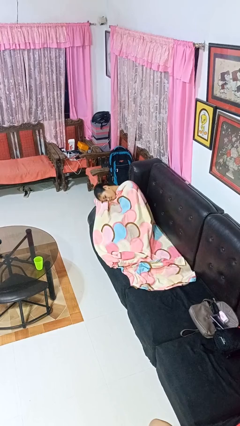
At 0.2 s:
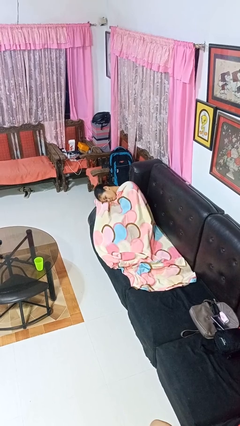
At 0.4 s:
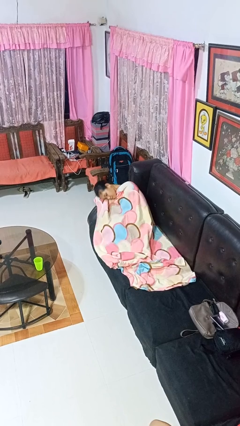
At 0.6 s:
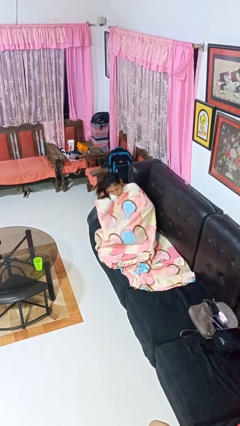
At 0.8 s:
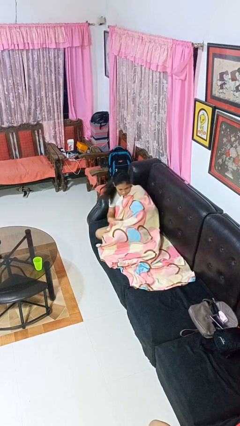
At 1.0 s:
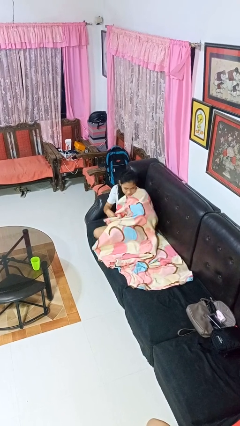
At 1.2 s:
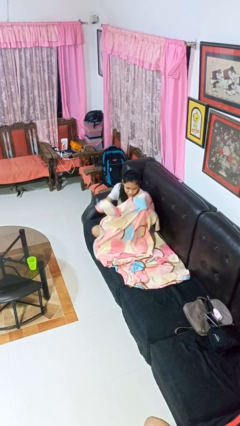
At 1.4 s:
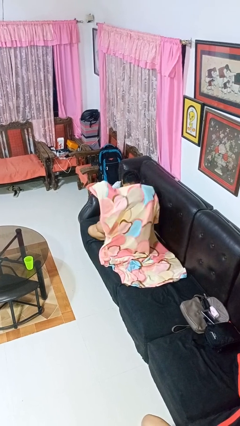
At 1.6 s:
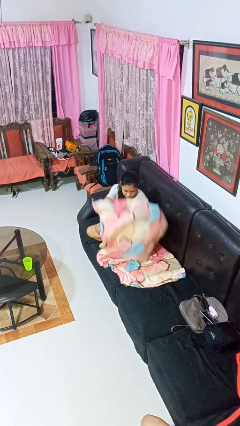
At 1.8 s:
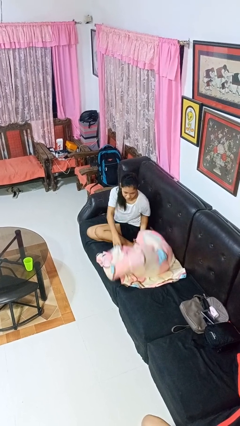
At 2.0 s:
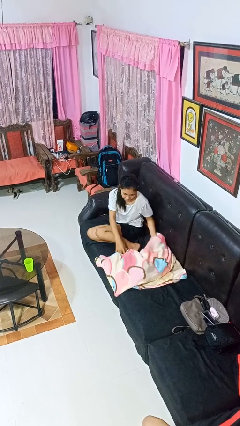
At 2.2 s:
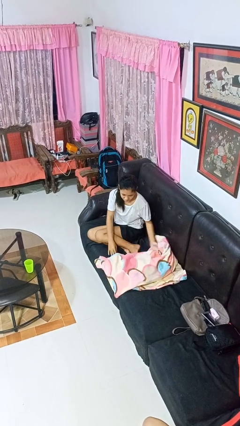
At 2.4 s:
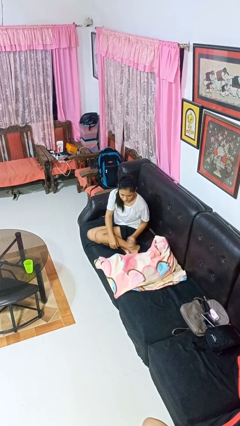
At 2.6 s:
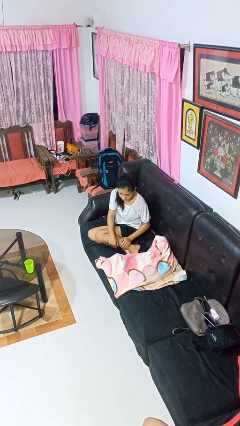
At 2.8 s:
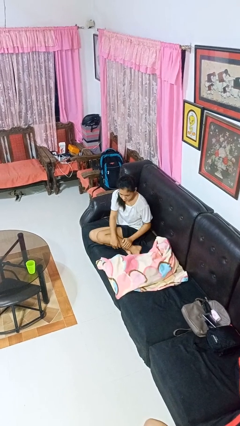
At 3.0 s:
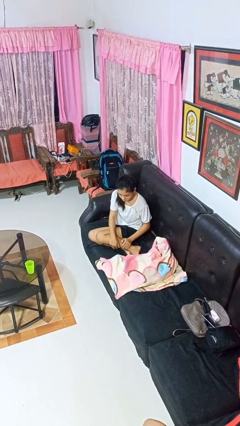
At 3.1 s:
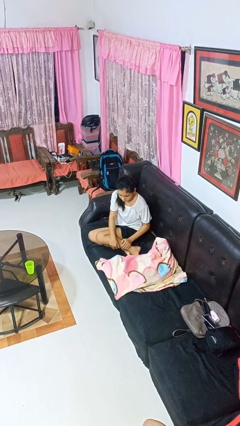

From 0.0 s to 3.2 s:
person uncovers with blanket

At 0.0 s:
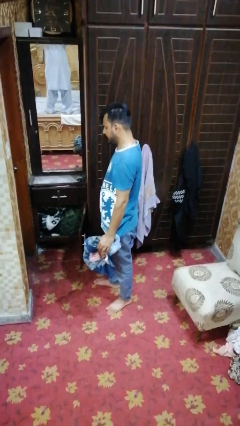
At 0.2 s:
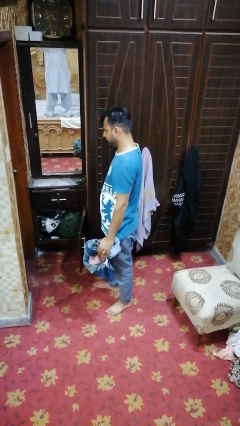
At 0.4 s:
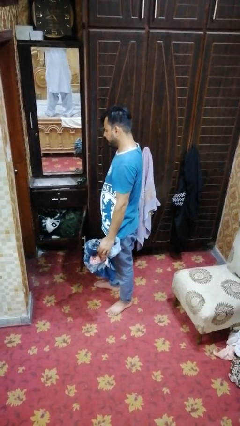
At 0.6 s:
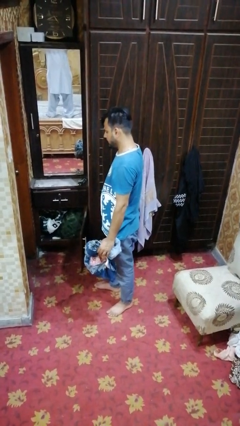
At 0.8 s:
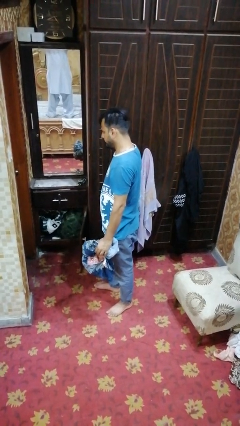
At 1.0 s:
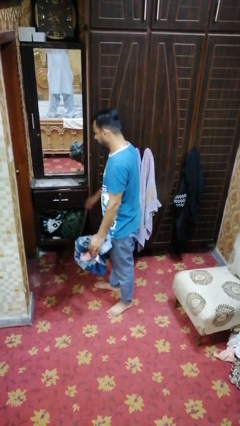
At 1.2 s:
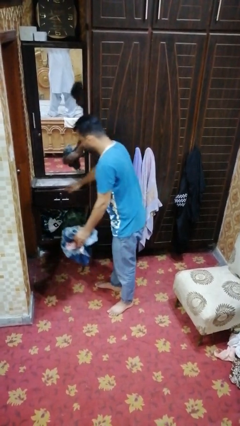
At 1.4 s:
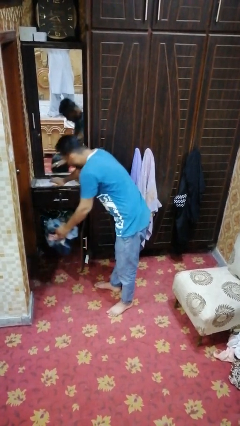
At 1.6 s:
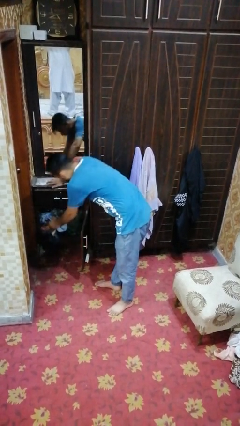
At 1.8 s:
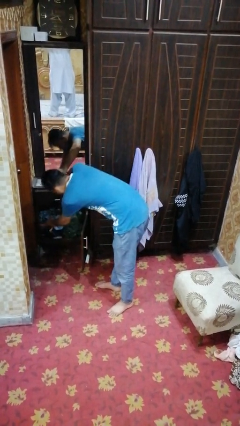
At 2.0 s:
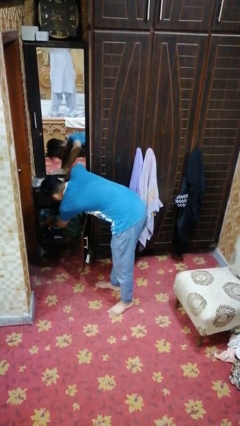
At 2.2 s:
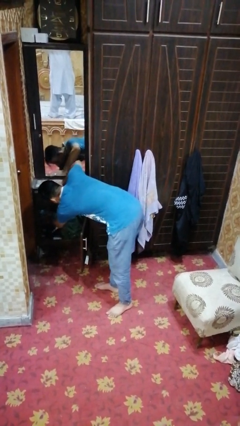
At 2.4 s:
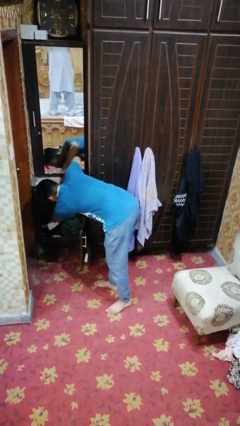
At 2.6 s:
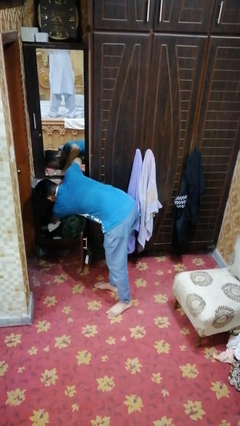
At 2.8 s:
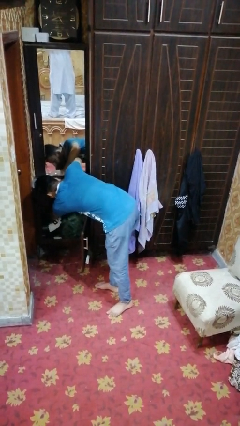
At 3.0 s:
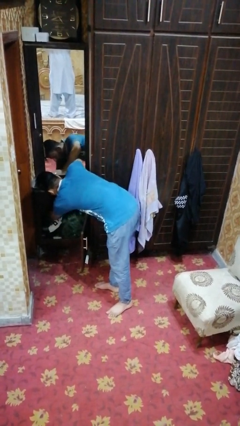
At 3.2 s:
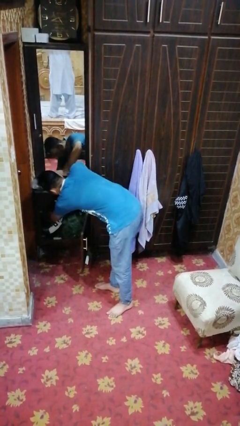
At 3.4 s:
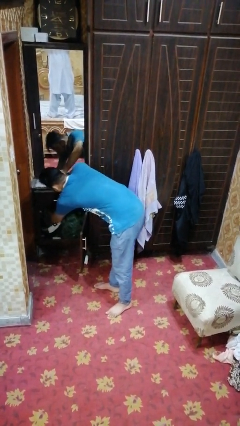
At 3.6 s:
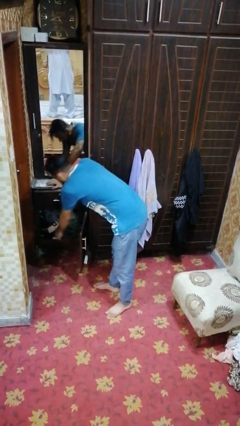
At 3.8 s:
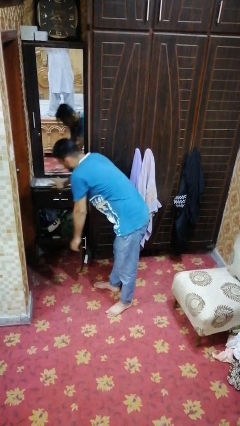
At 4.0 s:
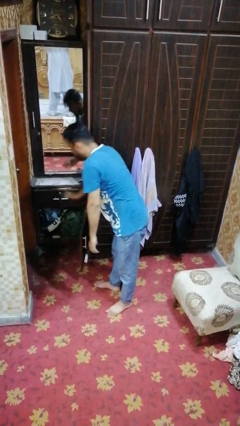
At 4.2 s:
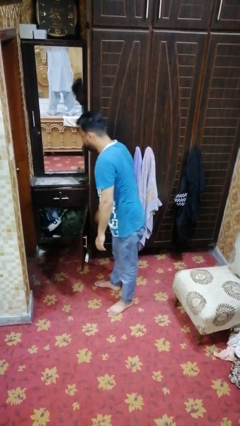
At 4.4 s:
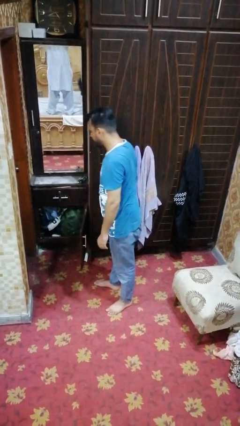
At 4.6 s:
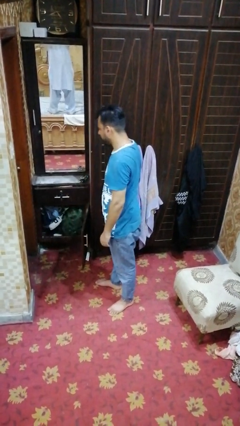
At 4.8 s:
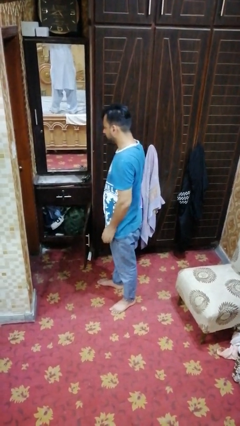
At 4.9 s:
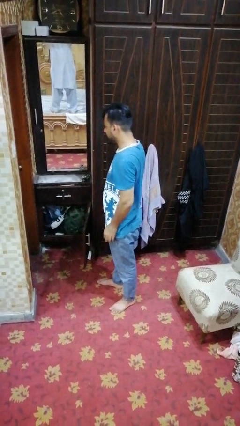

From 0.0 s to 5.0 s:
person puts clothes into dresser

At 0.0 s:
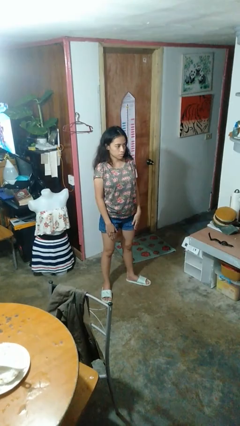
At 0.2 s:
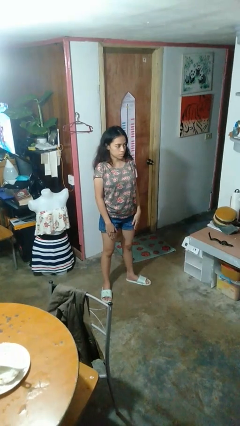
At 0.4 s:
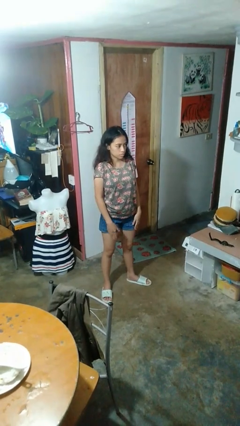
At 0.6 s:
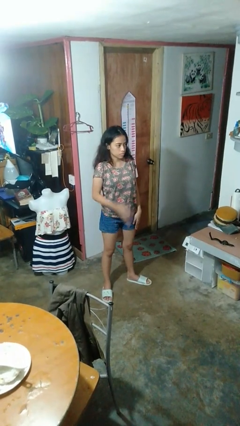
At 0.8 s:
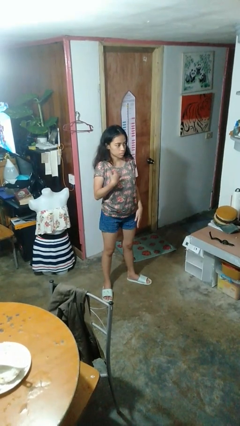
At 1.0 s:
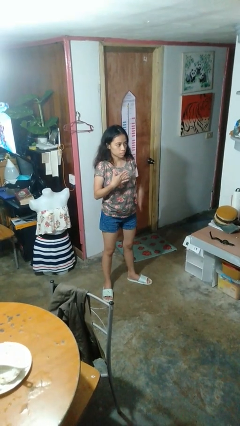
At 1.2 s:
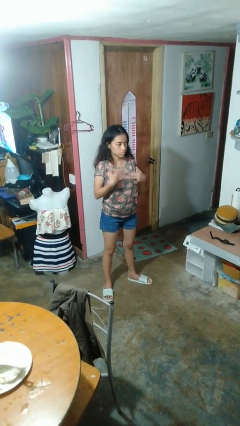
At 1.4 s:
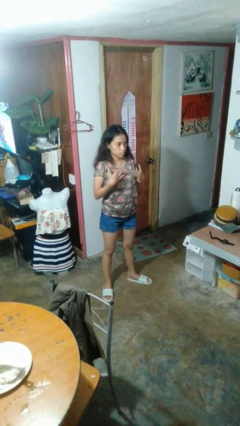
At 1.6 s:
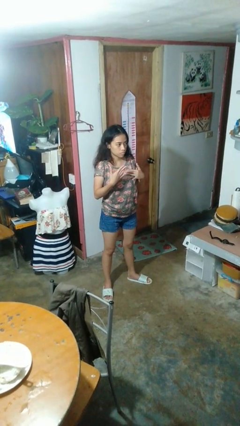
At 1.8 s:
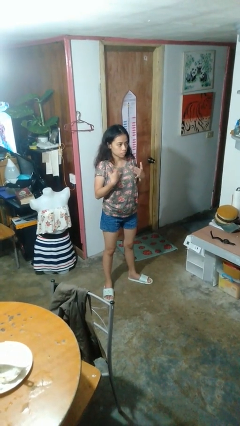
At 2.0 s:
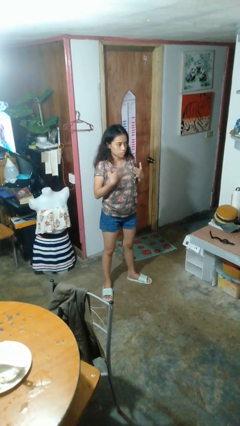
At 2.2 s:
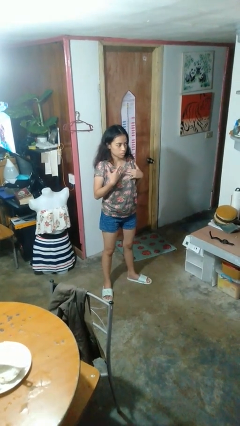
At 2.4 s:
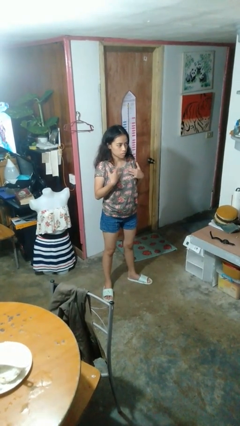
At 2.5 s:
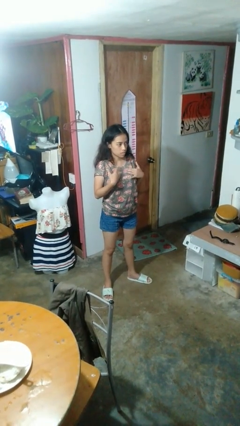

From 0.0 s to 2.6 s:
person drums on chest

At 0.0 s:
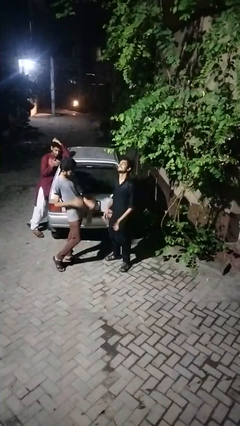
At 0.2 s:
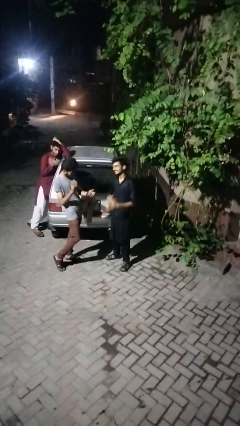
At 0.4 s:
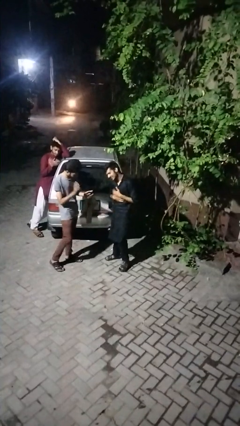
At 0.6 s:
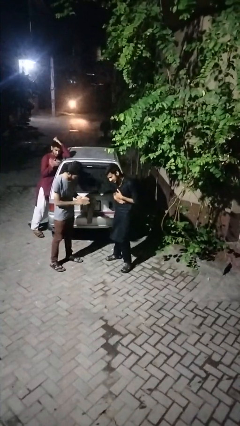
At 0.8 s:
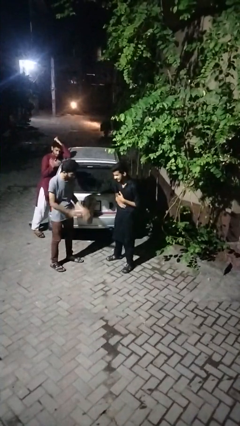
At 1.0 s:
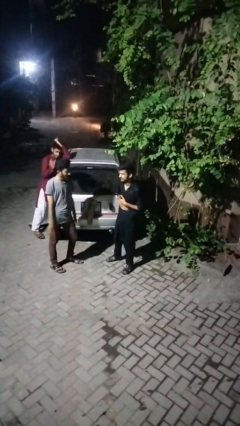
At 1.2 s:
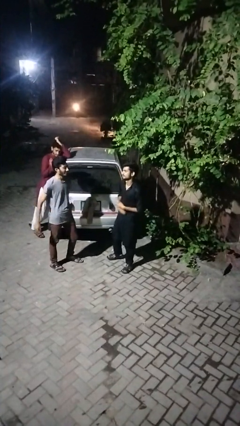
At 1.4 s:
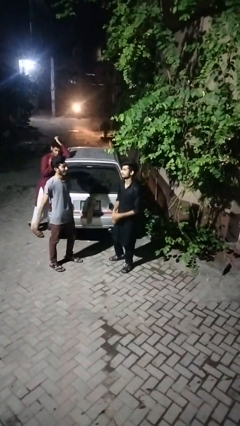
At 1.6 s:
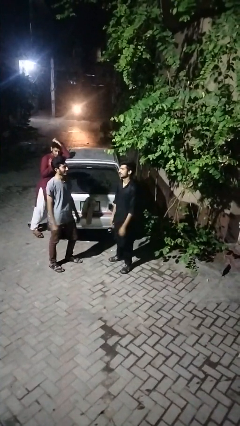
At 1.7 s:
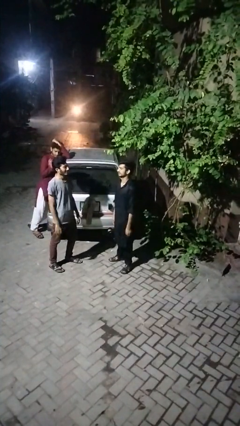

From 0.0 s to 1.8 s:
person laughs with person

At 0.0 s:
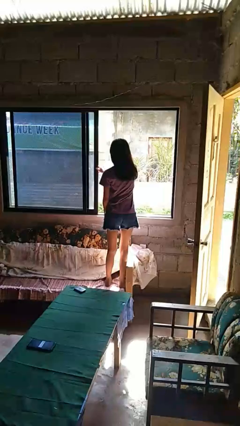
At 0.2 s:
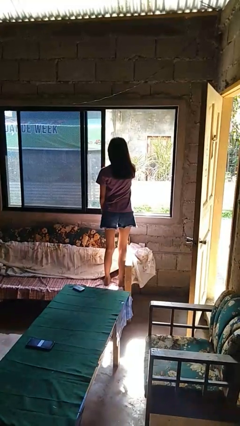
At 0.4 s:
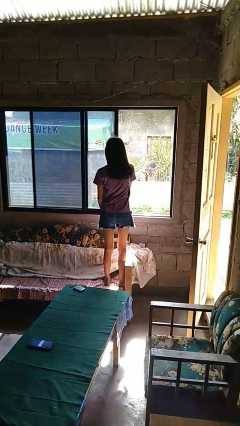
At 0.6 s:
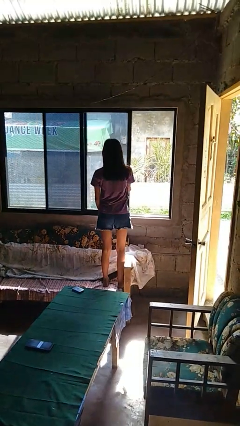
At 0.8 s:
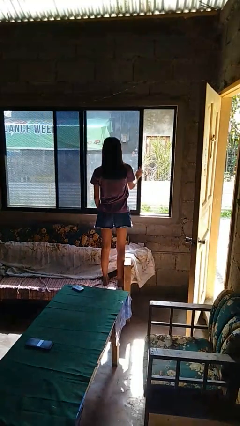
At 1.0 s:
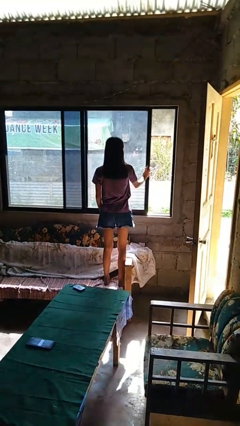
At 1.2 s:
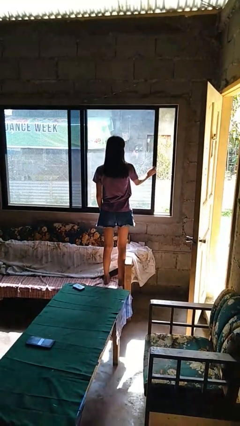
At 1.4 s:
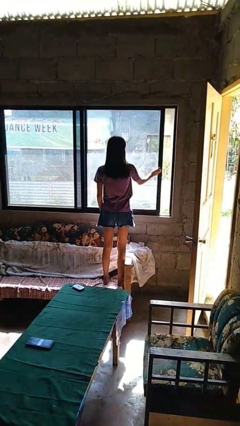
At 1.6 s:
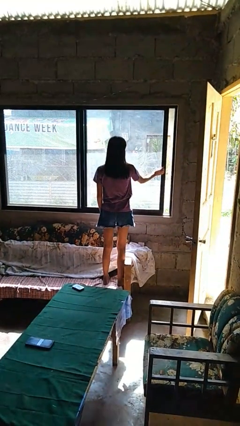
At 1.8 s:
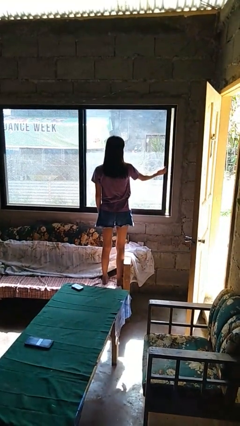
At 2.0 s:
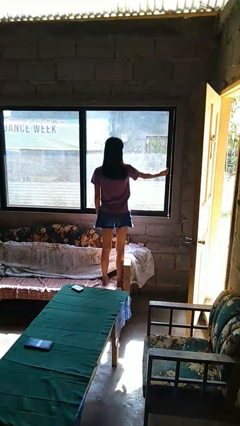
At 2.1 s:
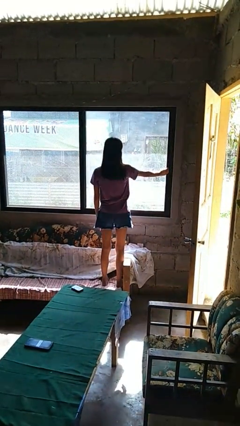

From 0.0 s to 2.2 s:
person closes home window

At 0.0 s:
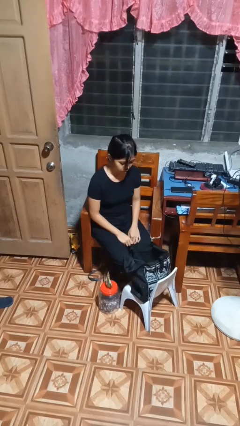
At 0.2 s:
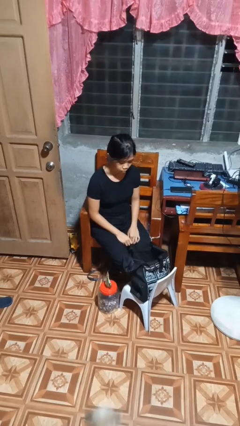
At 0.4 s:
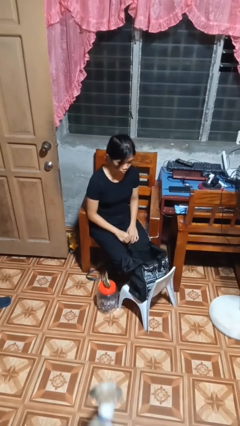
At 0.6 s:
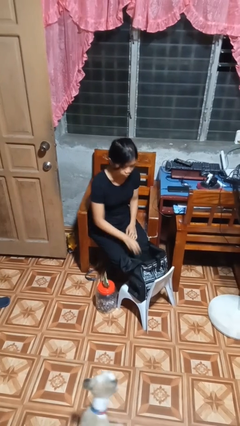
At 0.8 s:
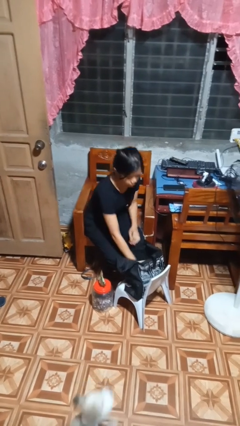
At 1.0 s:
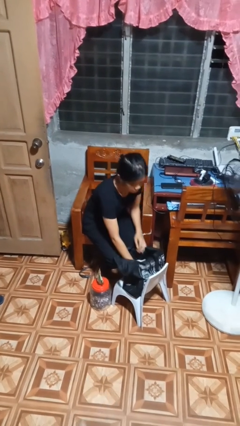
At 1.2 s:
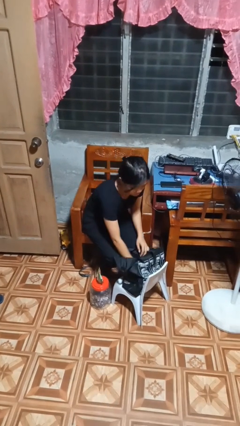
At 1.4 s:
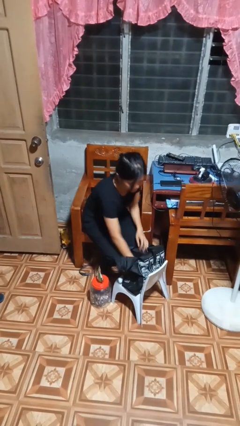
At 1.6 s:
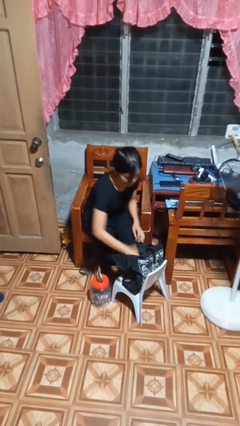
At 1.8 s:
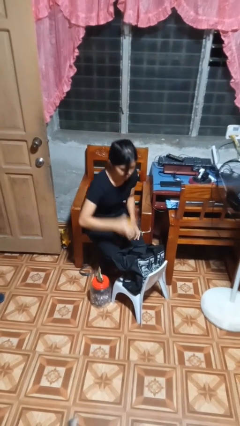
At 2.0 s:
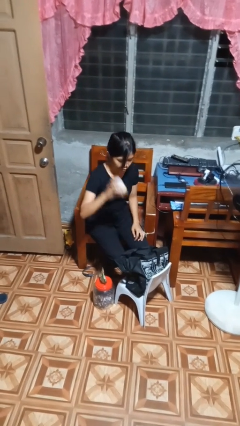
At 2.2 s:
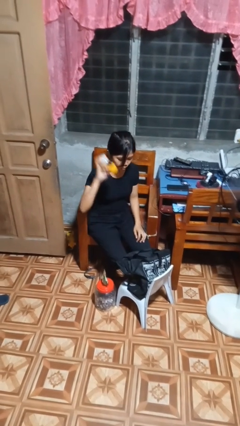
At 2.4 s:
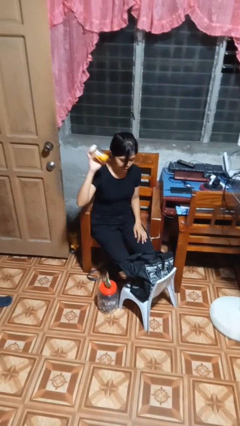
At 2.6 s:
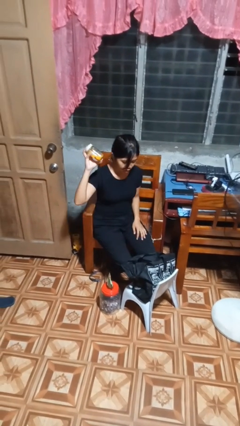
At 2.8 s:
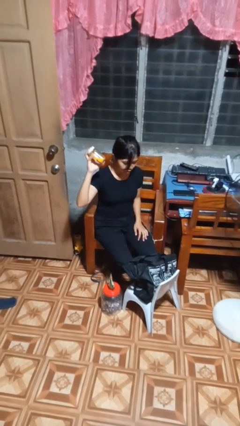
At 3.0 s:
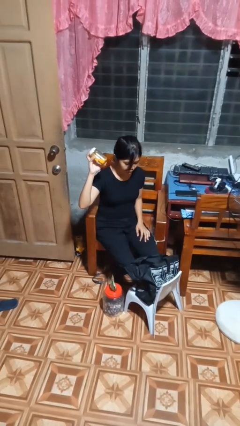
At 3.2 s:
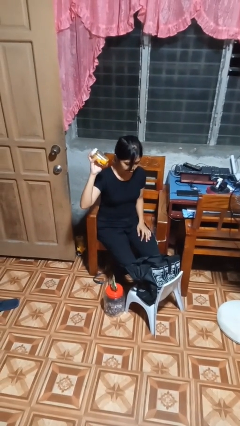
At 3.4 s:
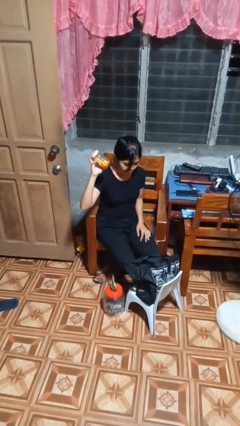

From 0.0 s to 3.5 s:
person searches in bag
